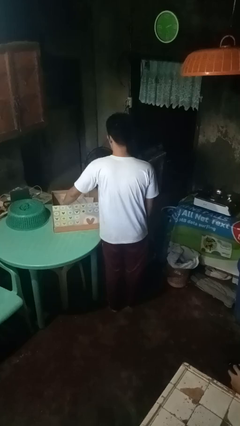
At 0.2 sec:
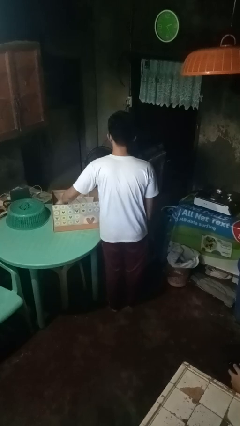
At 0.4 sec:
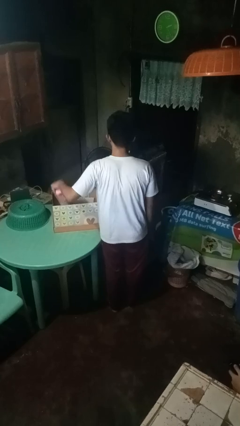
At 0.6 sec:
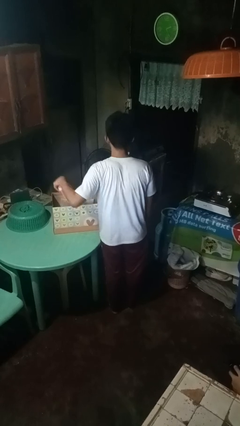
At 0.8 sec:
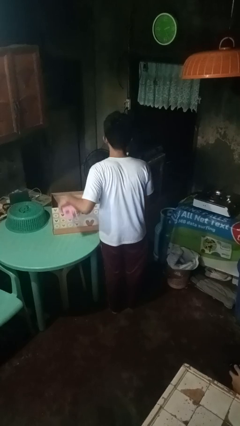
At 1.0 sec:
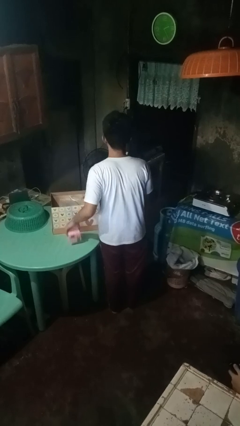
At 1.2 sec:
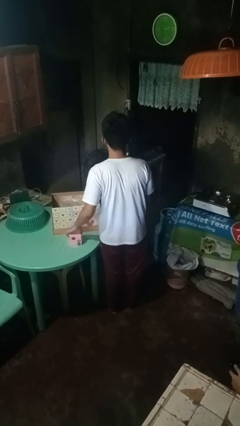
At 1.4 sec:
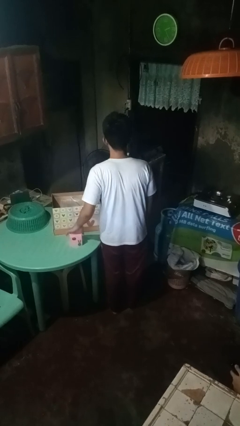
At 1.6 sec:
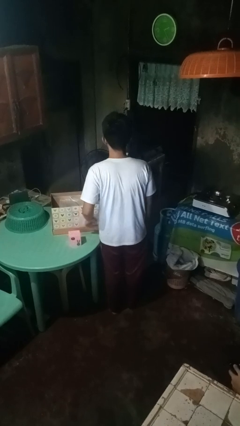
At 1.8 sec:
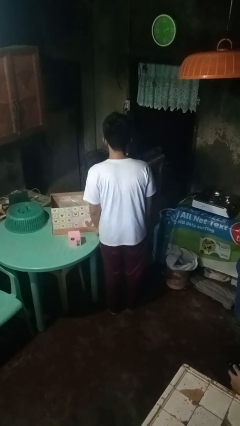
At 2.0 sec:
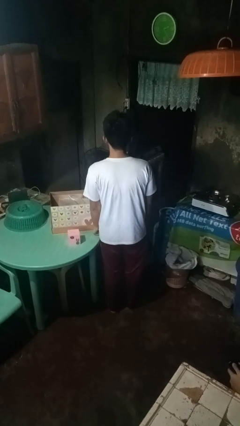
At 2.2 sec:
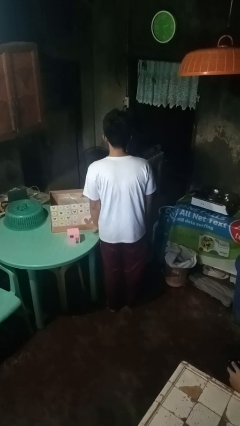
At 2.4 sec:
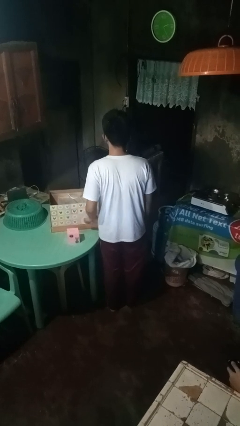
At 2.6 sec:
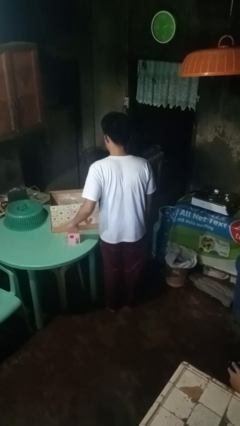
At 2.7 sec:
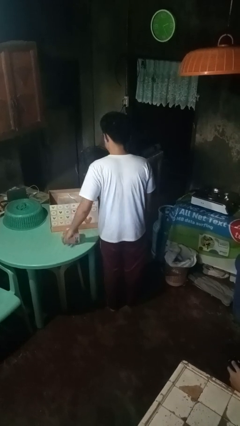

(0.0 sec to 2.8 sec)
person takes object from box

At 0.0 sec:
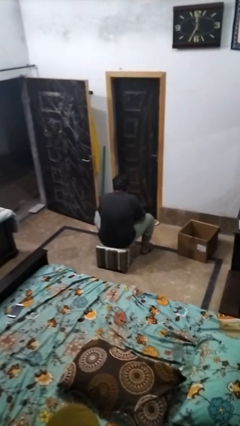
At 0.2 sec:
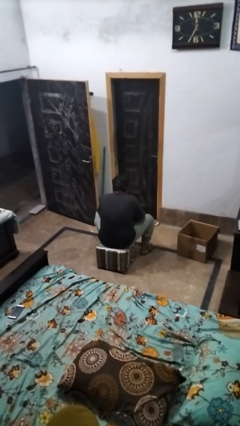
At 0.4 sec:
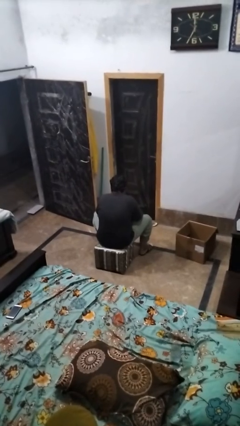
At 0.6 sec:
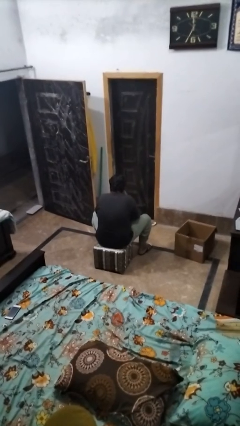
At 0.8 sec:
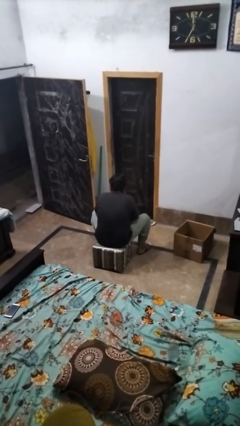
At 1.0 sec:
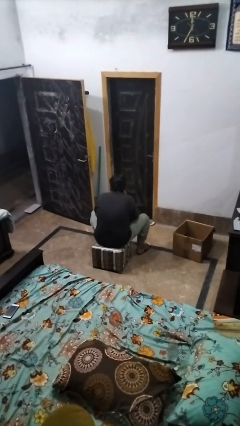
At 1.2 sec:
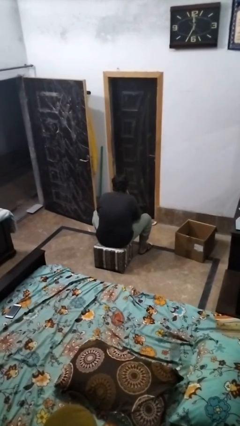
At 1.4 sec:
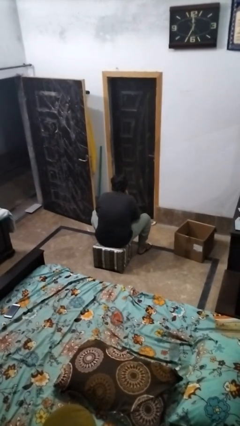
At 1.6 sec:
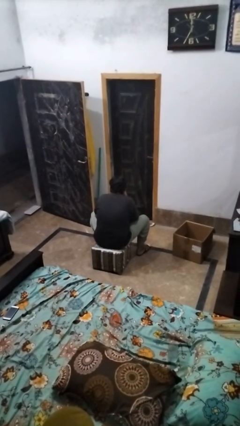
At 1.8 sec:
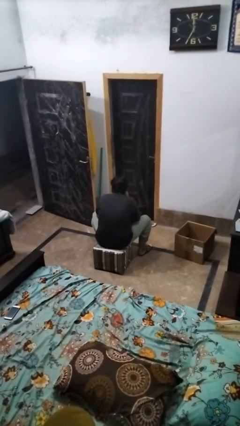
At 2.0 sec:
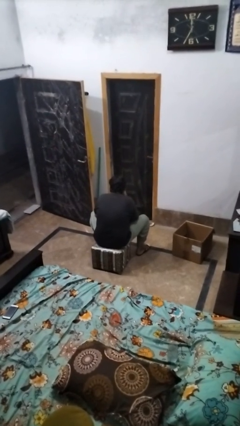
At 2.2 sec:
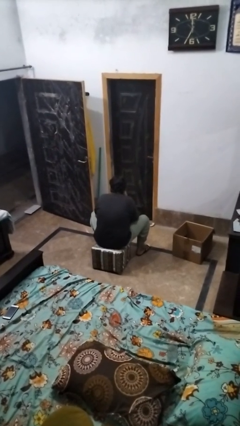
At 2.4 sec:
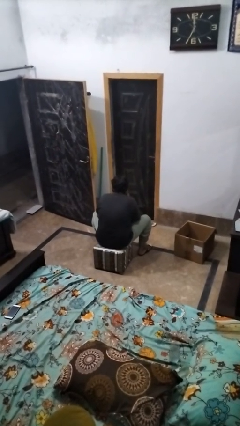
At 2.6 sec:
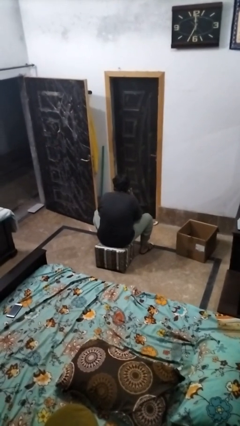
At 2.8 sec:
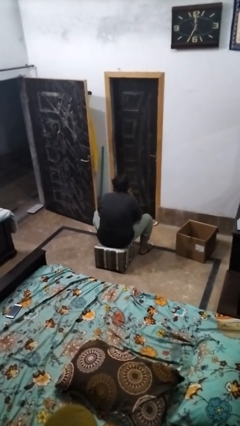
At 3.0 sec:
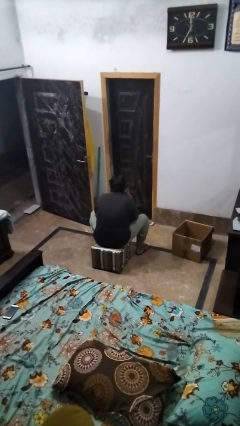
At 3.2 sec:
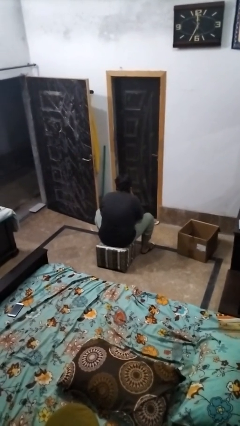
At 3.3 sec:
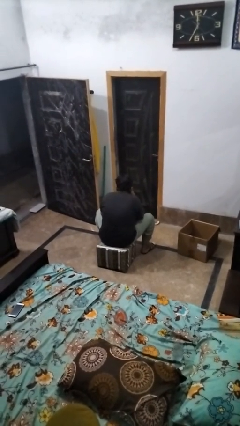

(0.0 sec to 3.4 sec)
person strokes chin

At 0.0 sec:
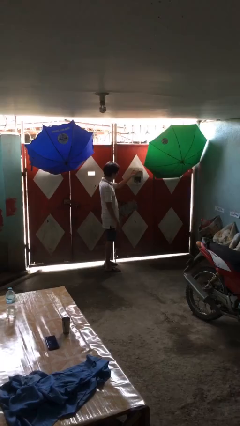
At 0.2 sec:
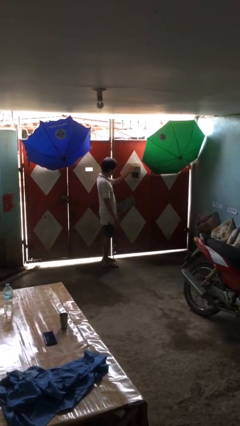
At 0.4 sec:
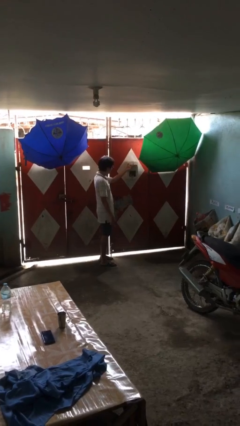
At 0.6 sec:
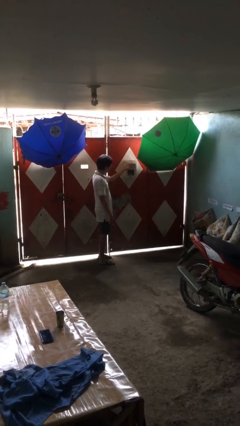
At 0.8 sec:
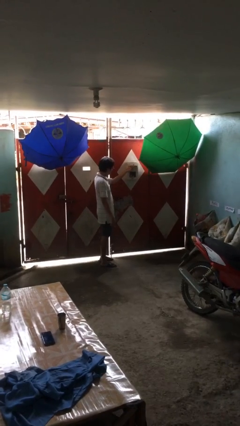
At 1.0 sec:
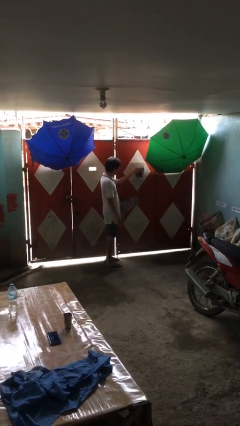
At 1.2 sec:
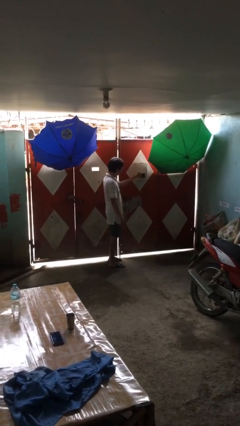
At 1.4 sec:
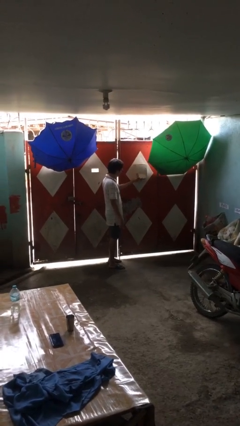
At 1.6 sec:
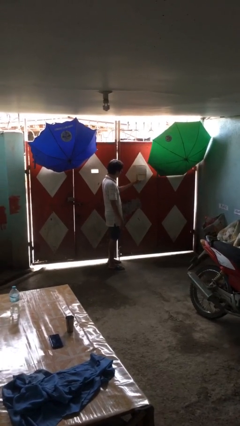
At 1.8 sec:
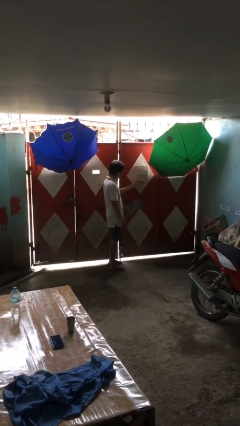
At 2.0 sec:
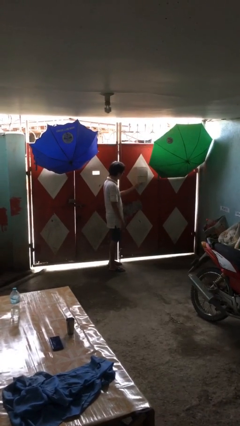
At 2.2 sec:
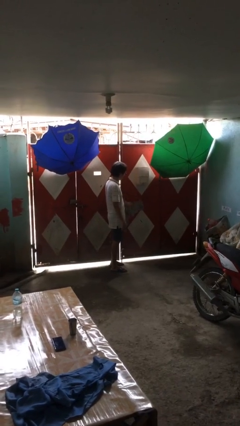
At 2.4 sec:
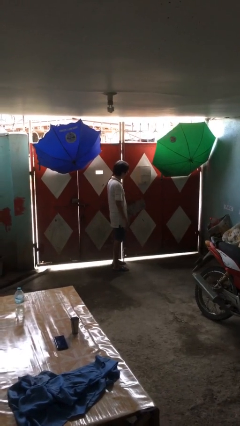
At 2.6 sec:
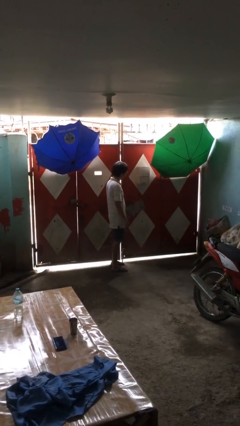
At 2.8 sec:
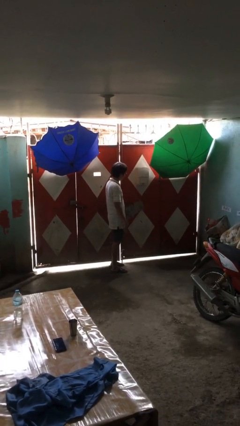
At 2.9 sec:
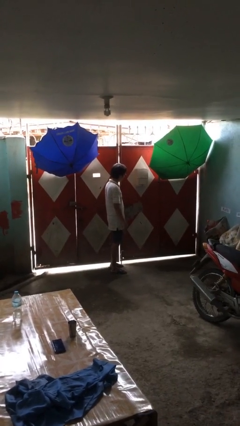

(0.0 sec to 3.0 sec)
person closes mailbox

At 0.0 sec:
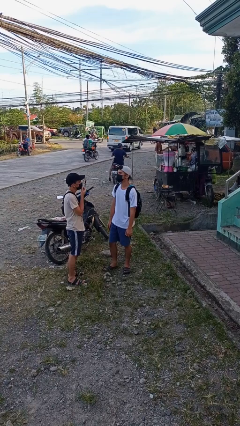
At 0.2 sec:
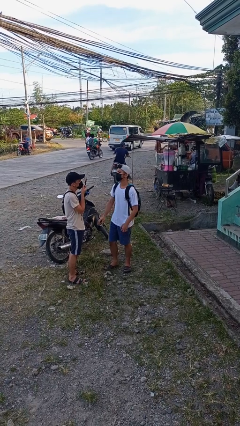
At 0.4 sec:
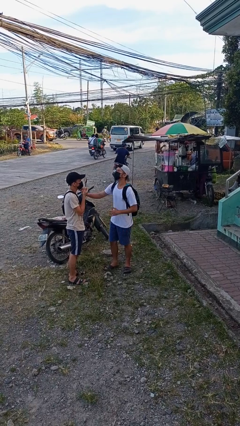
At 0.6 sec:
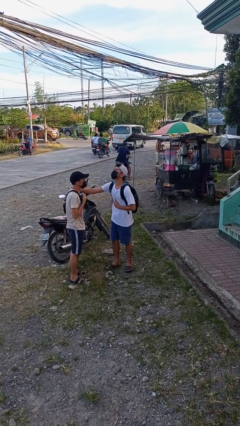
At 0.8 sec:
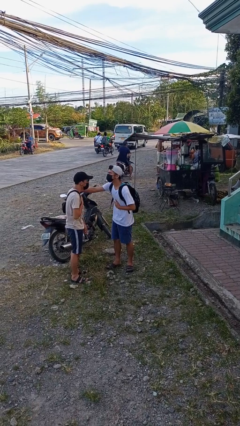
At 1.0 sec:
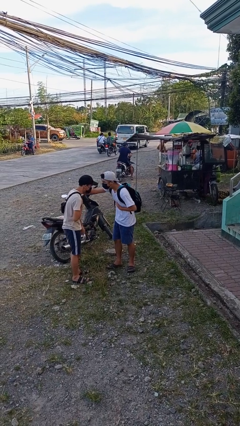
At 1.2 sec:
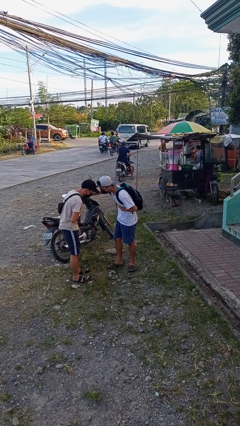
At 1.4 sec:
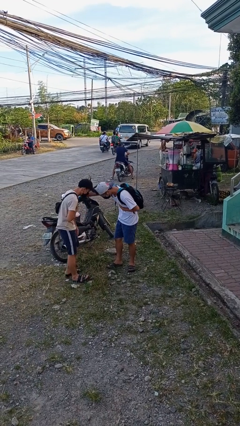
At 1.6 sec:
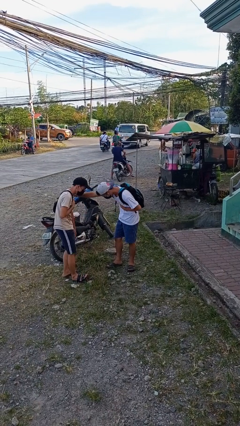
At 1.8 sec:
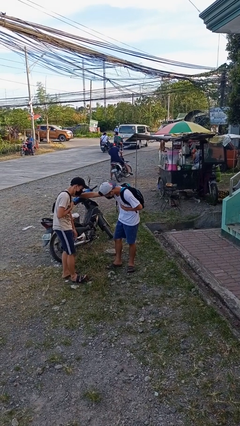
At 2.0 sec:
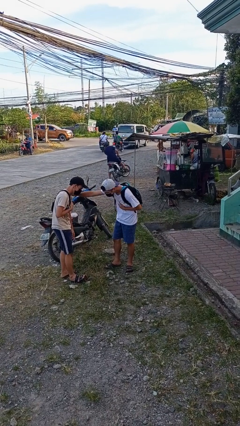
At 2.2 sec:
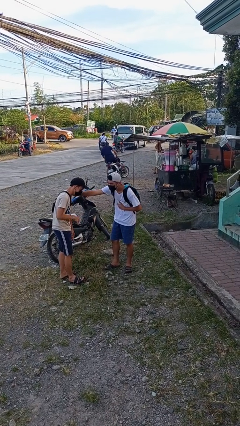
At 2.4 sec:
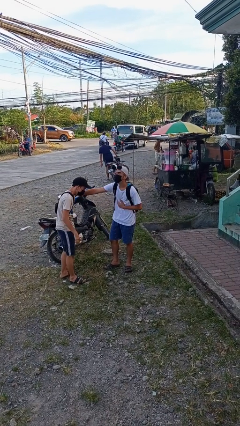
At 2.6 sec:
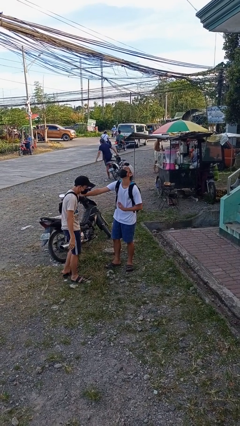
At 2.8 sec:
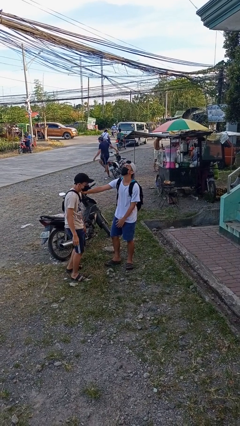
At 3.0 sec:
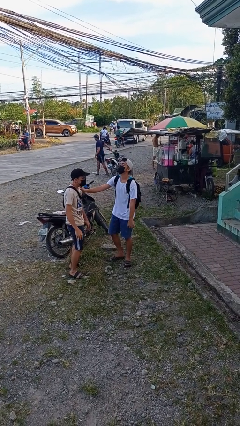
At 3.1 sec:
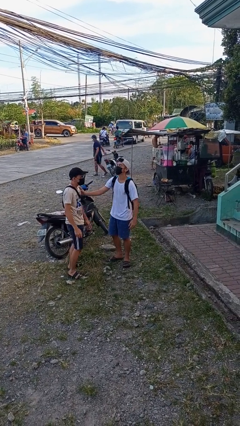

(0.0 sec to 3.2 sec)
person laughs with person

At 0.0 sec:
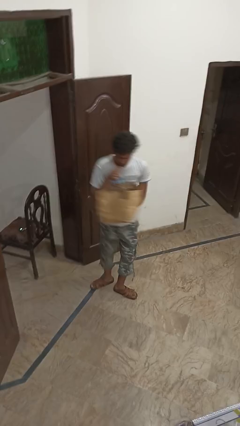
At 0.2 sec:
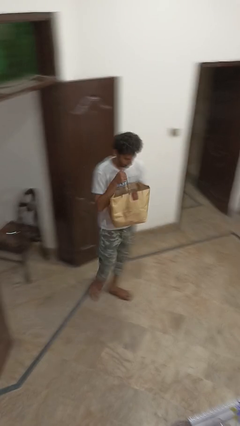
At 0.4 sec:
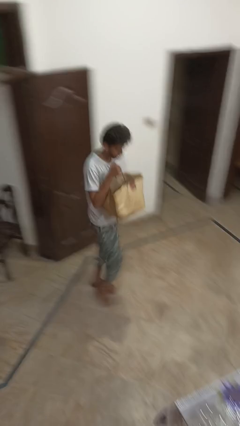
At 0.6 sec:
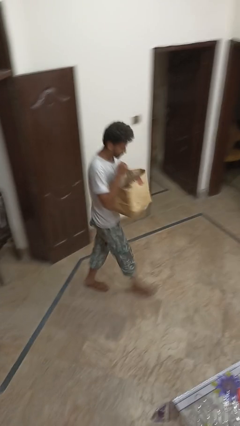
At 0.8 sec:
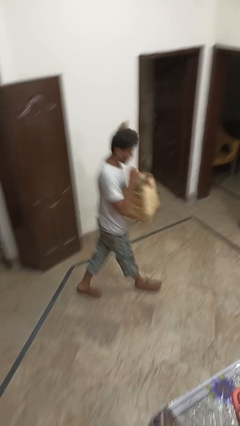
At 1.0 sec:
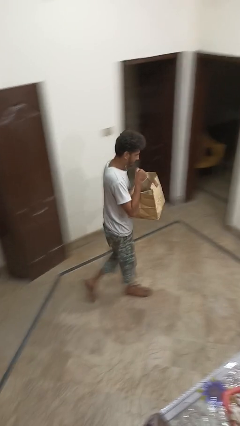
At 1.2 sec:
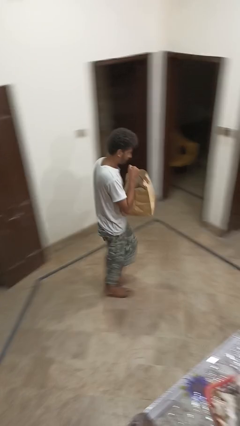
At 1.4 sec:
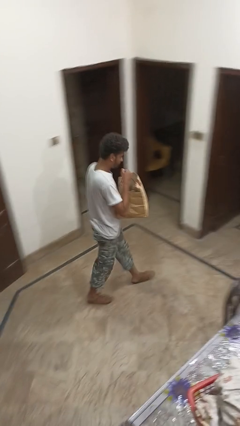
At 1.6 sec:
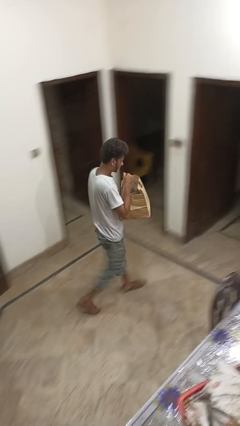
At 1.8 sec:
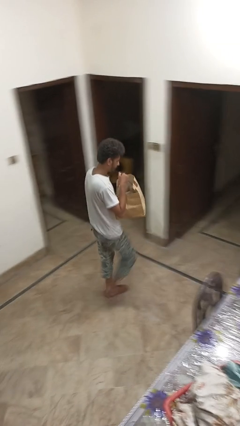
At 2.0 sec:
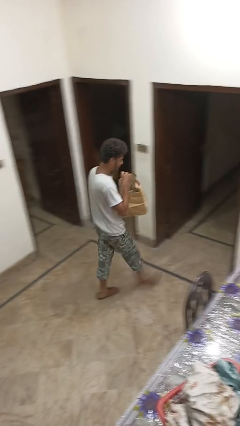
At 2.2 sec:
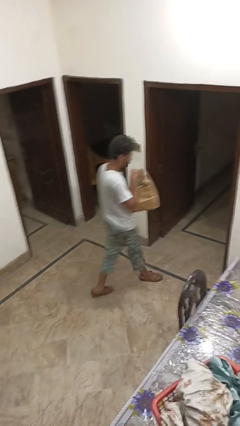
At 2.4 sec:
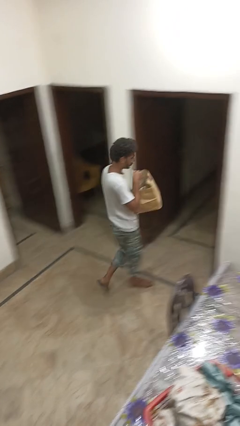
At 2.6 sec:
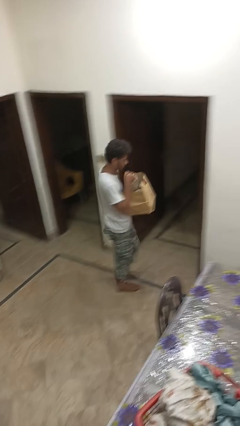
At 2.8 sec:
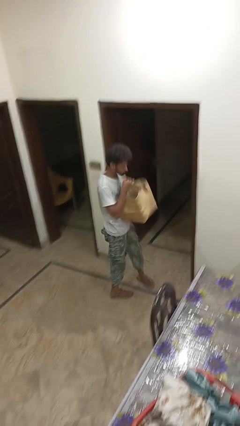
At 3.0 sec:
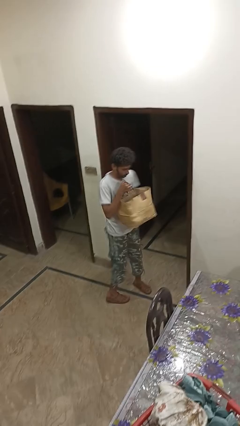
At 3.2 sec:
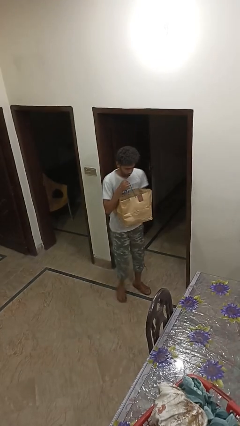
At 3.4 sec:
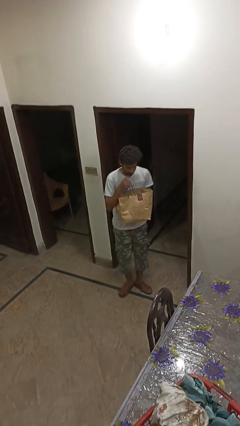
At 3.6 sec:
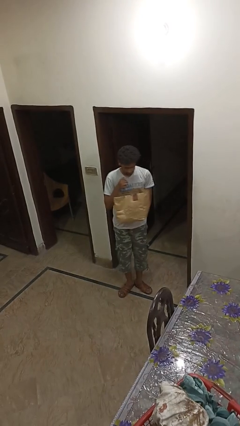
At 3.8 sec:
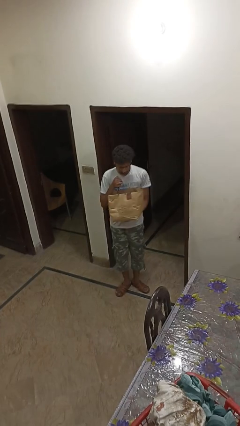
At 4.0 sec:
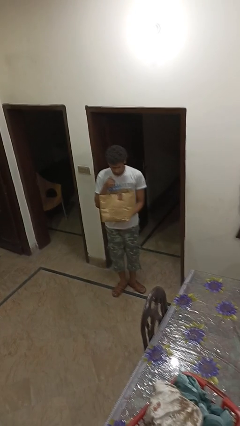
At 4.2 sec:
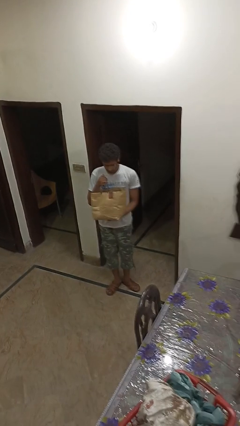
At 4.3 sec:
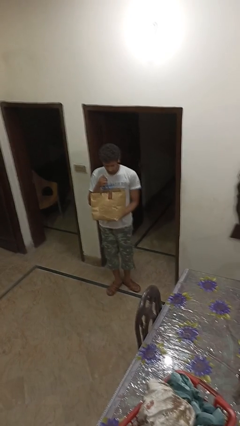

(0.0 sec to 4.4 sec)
person carries groceries

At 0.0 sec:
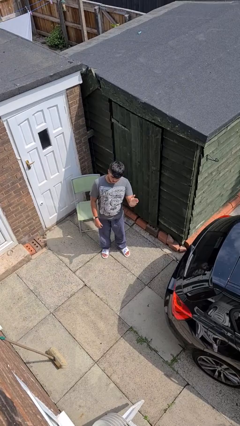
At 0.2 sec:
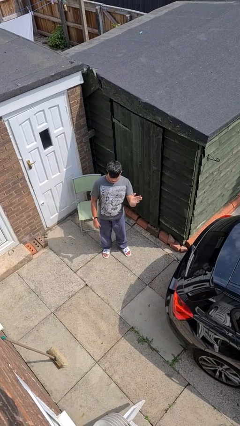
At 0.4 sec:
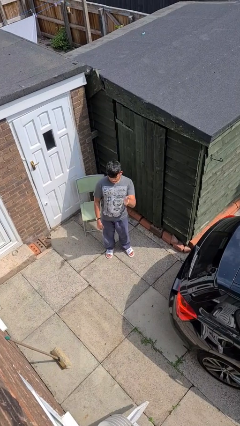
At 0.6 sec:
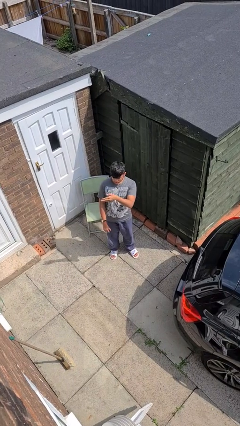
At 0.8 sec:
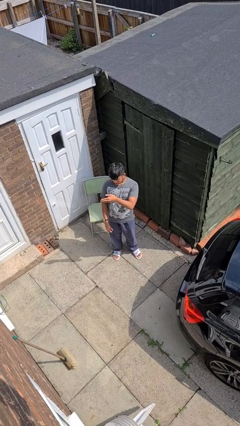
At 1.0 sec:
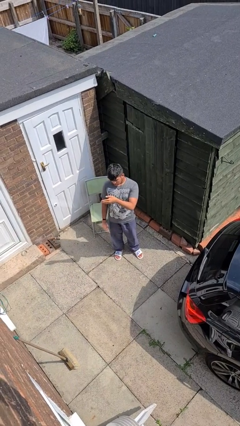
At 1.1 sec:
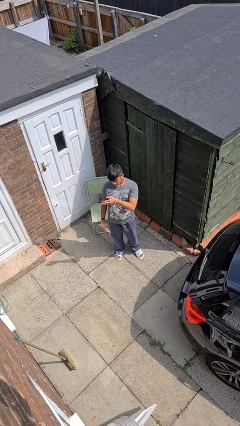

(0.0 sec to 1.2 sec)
person gestures swipe right
